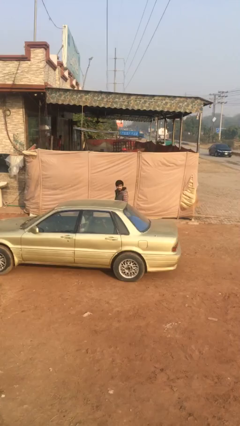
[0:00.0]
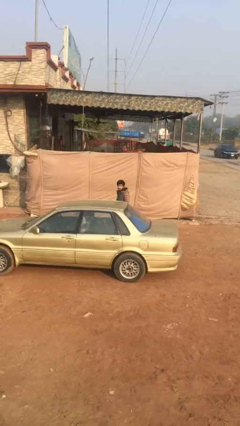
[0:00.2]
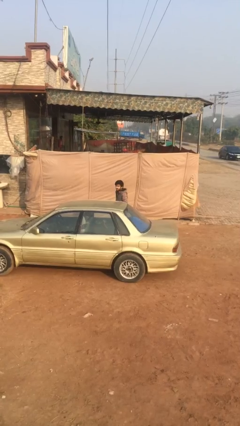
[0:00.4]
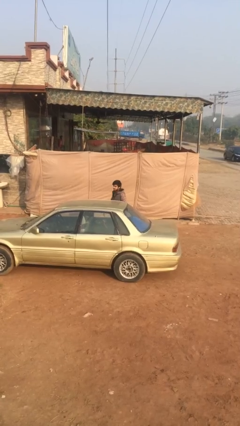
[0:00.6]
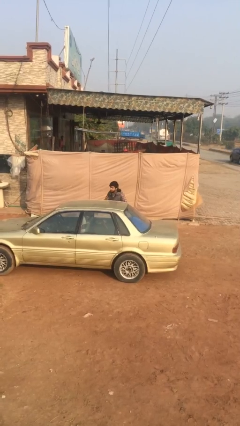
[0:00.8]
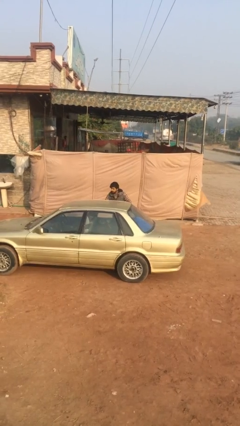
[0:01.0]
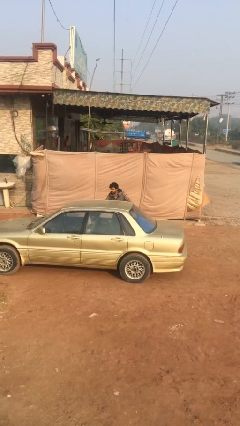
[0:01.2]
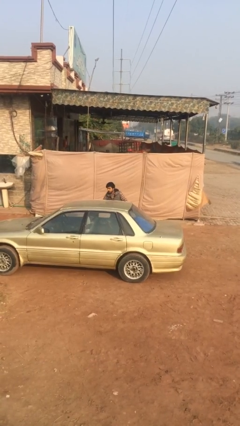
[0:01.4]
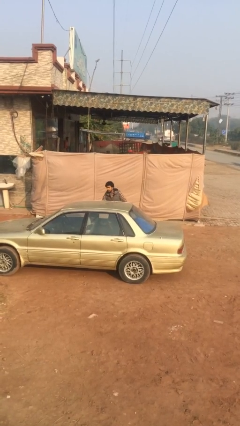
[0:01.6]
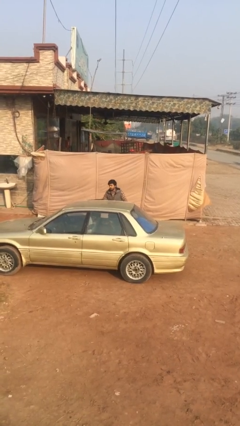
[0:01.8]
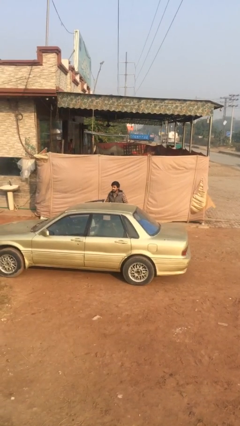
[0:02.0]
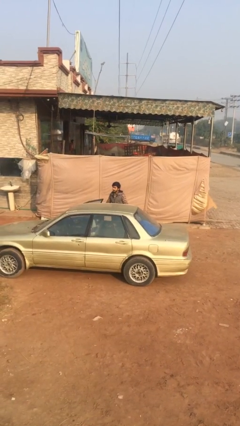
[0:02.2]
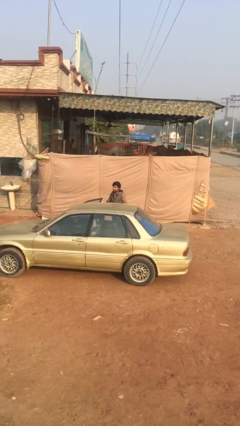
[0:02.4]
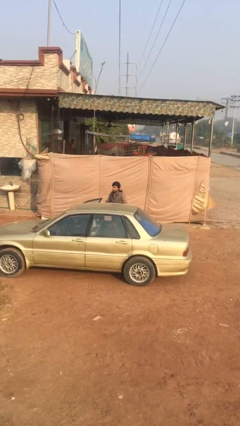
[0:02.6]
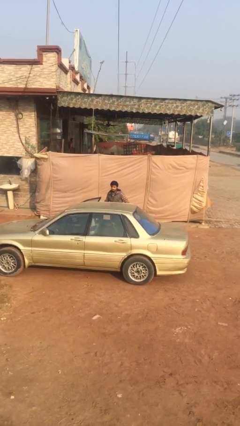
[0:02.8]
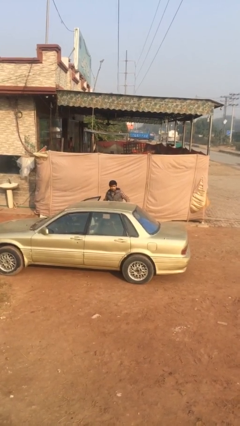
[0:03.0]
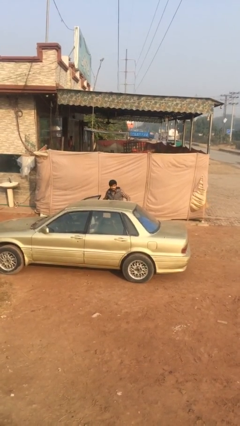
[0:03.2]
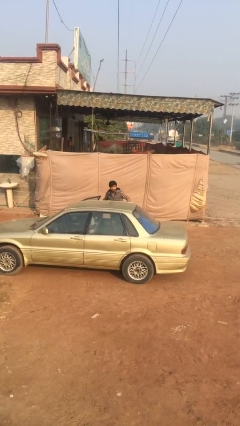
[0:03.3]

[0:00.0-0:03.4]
person opens car door

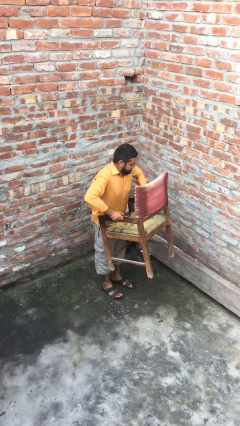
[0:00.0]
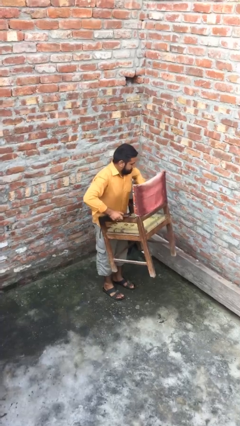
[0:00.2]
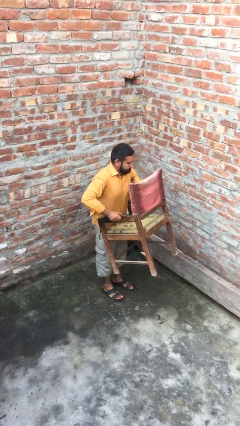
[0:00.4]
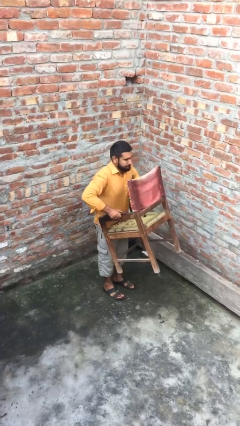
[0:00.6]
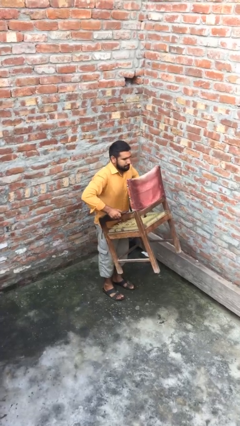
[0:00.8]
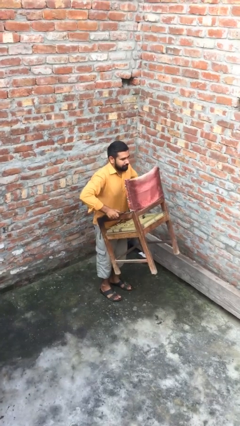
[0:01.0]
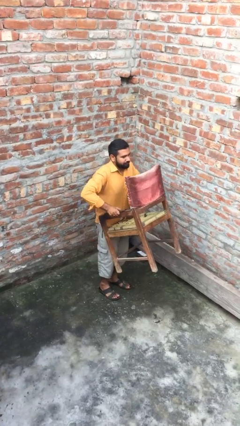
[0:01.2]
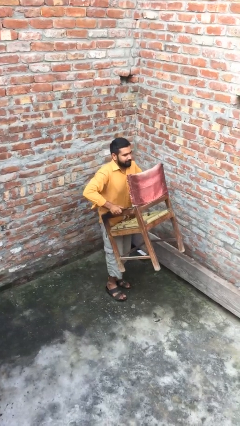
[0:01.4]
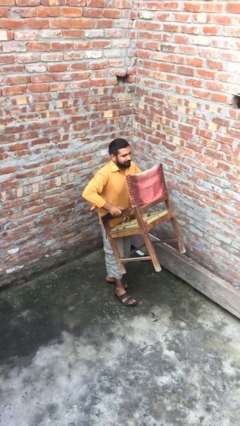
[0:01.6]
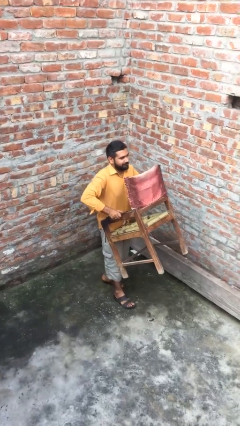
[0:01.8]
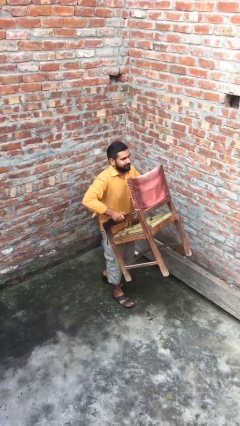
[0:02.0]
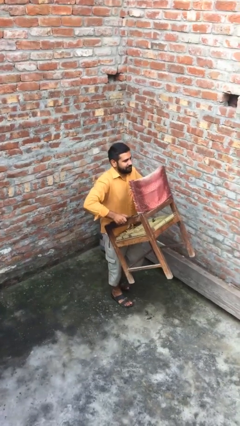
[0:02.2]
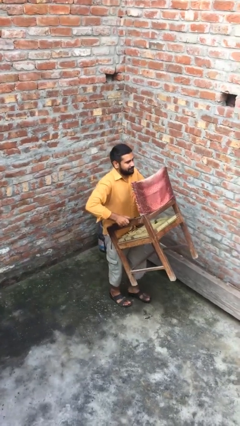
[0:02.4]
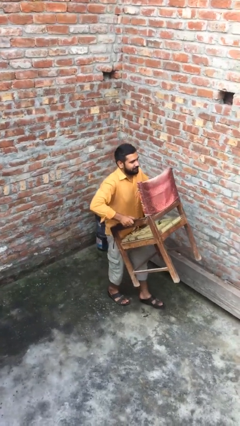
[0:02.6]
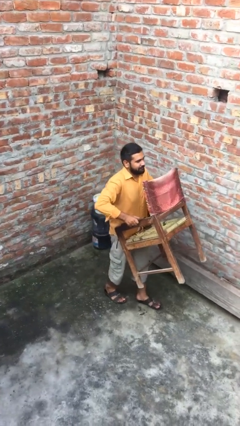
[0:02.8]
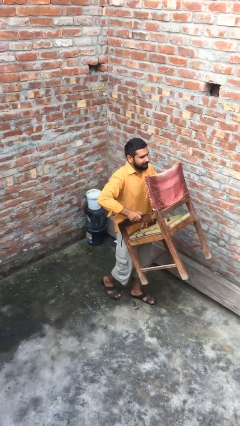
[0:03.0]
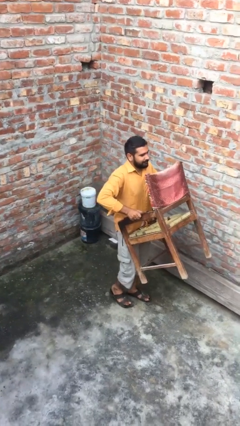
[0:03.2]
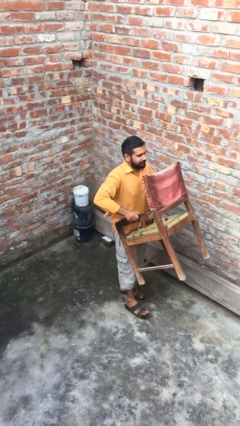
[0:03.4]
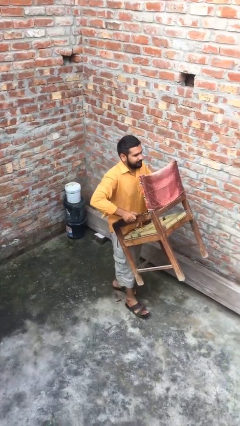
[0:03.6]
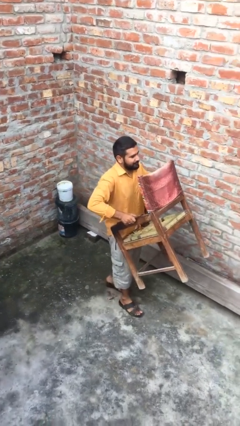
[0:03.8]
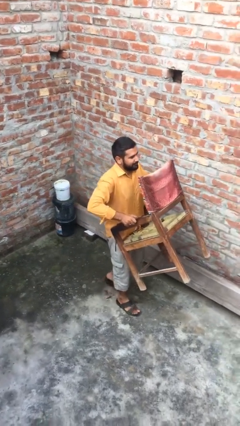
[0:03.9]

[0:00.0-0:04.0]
person carries heavy object

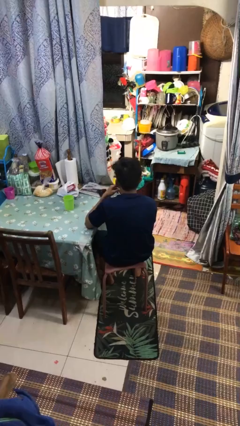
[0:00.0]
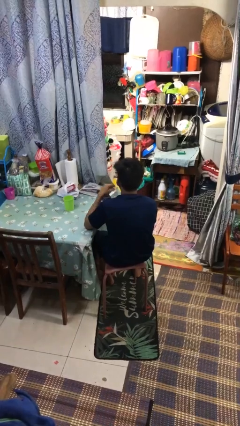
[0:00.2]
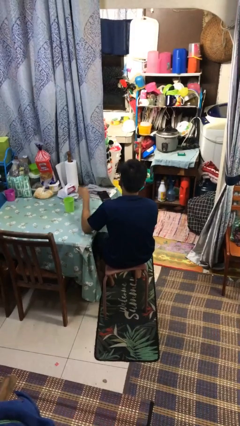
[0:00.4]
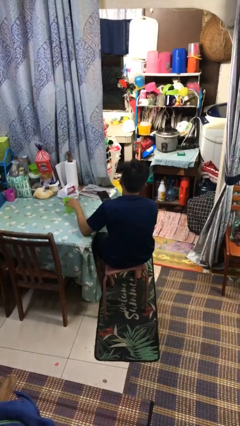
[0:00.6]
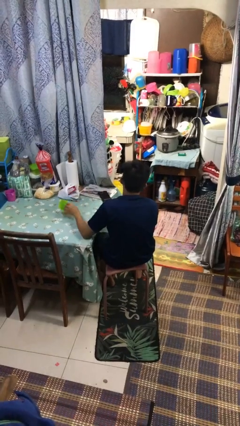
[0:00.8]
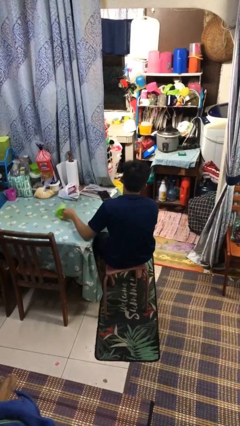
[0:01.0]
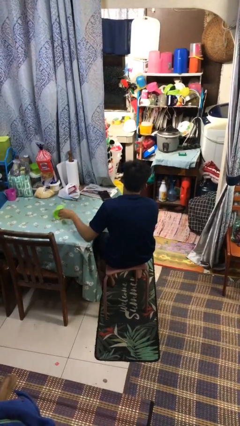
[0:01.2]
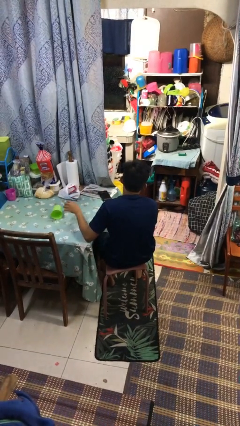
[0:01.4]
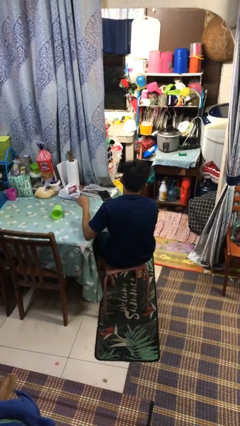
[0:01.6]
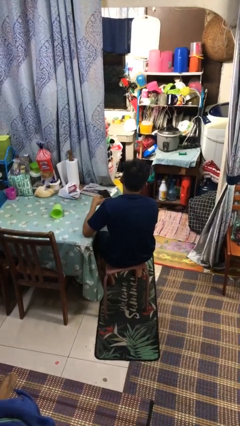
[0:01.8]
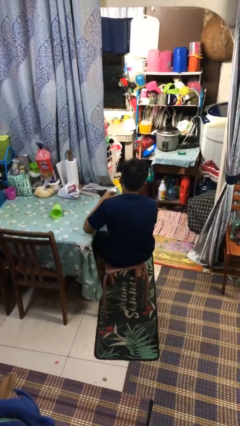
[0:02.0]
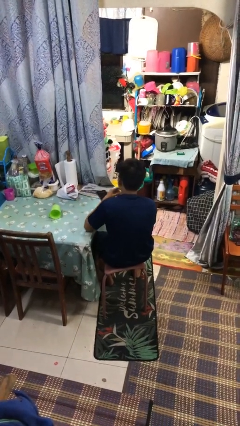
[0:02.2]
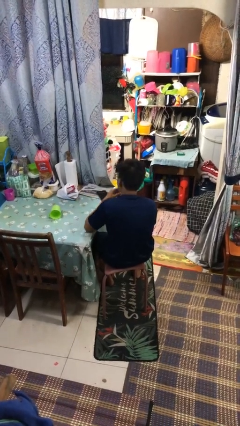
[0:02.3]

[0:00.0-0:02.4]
person knocks over glass

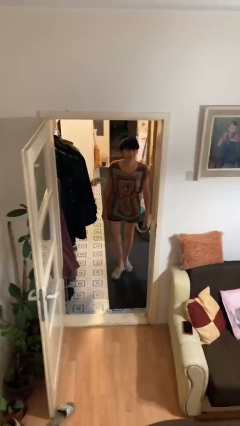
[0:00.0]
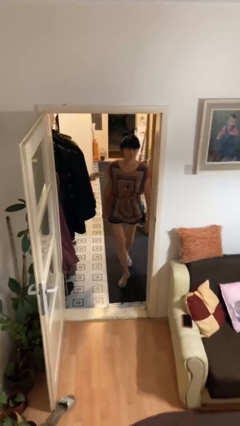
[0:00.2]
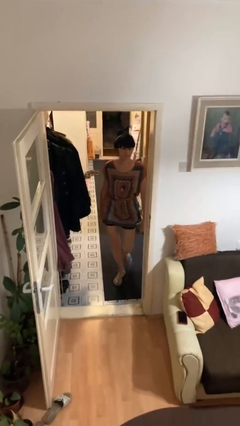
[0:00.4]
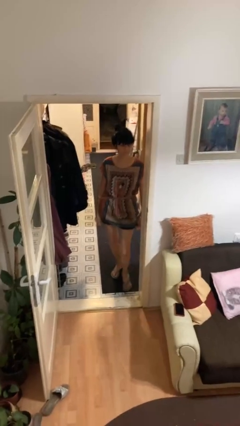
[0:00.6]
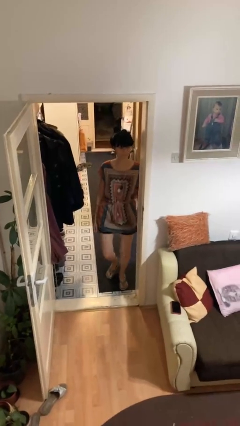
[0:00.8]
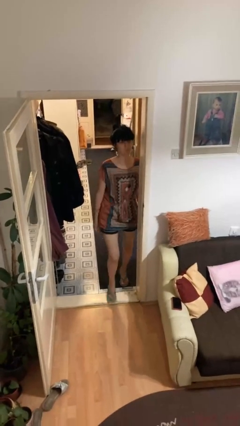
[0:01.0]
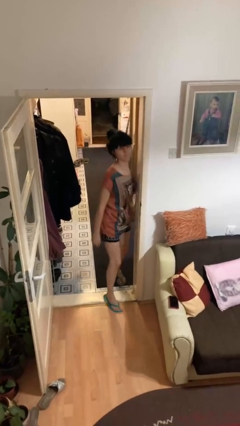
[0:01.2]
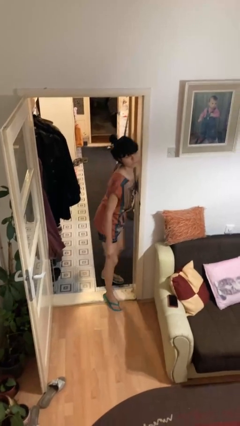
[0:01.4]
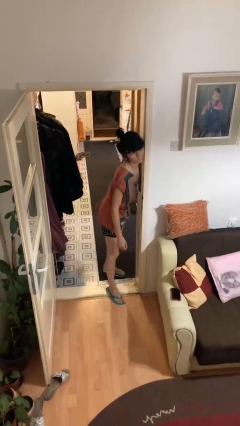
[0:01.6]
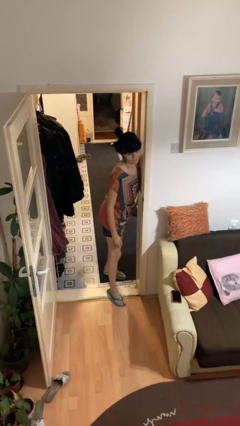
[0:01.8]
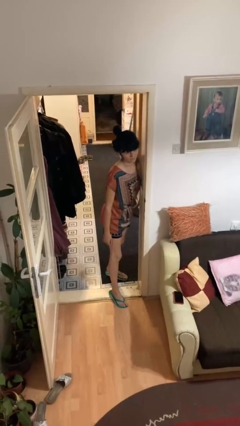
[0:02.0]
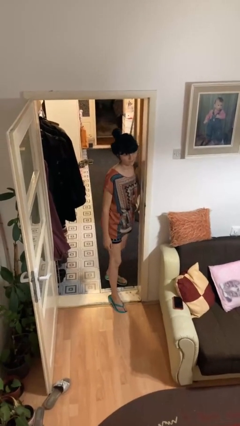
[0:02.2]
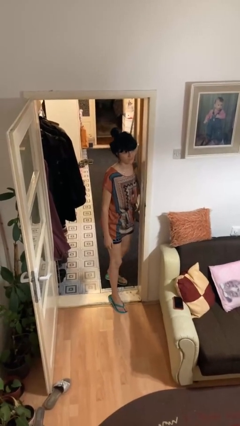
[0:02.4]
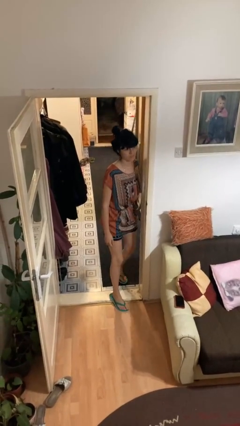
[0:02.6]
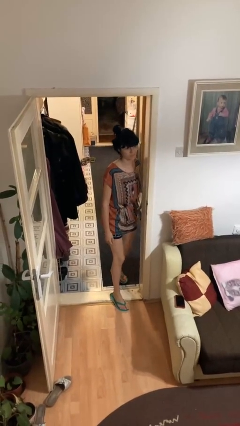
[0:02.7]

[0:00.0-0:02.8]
person bumps into wall

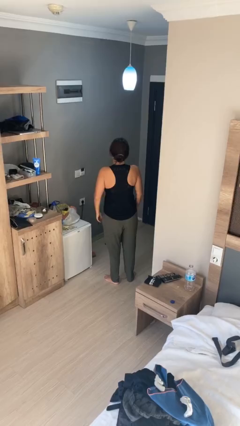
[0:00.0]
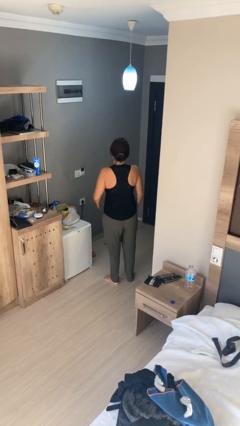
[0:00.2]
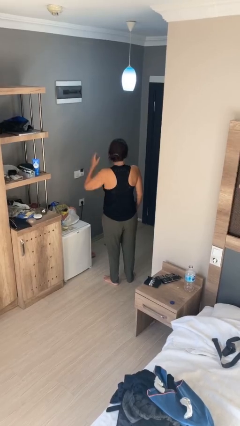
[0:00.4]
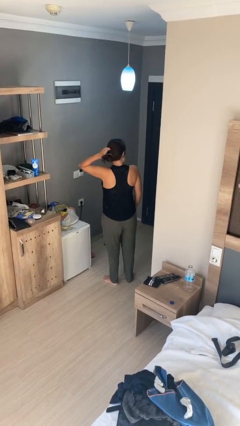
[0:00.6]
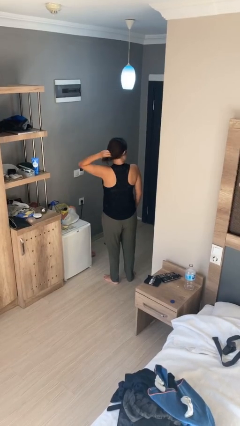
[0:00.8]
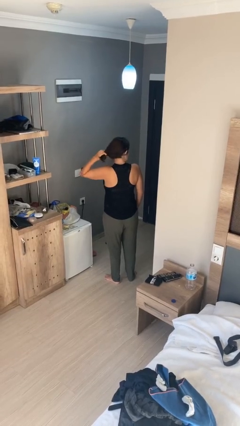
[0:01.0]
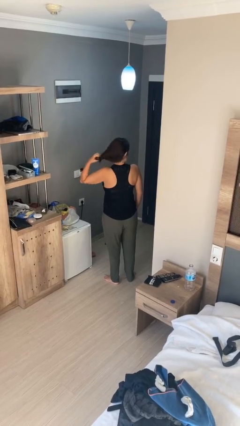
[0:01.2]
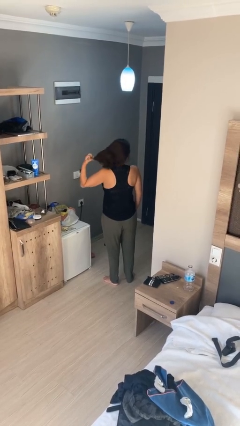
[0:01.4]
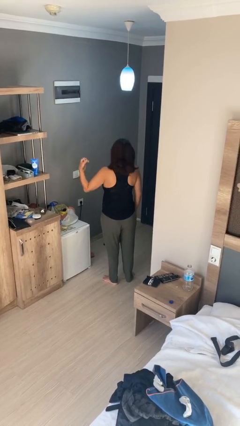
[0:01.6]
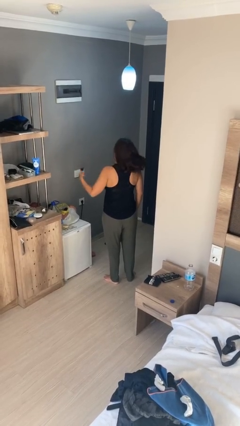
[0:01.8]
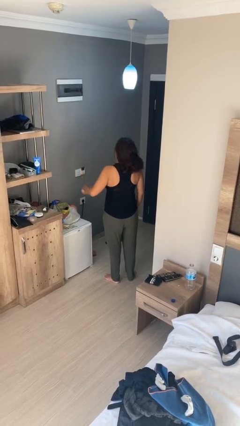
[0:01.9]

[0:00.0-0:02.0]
person takes off hairtie

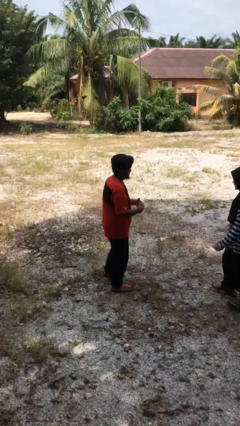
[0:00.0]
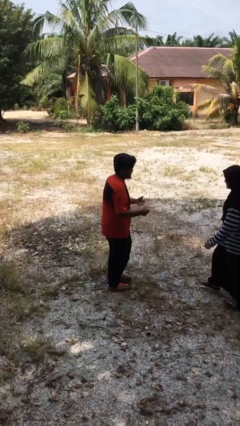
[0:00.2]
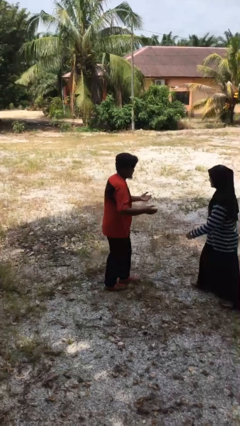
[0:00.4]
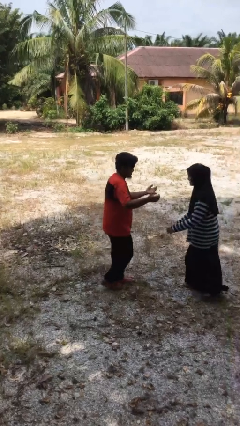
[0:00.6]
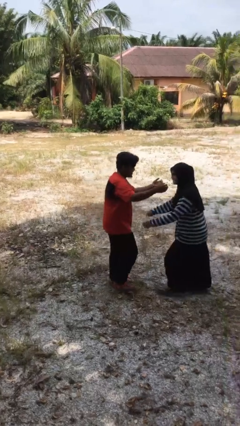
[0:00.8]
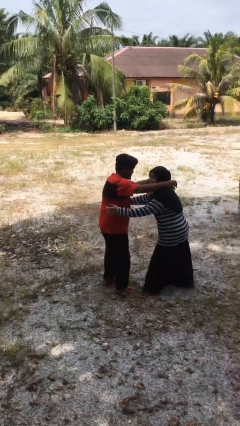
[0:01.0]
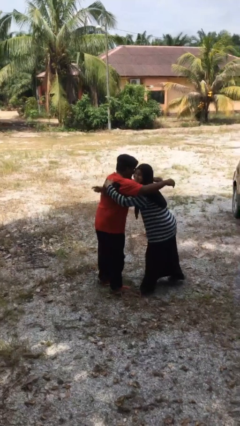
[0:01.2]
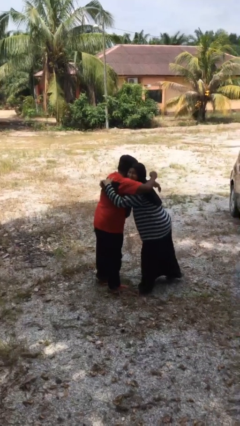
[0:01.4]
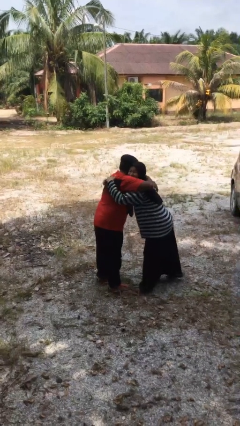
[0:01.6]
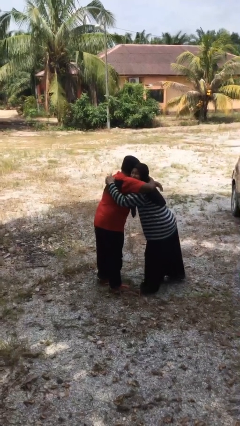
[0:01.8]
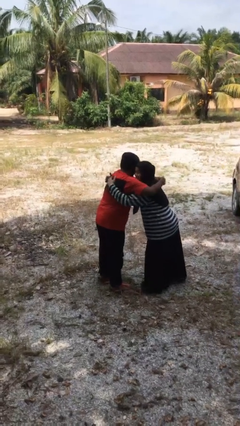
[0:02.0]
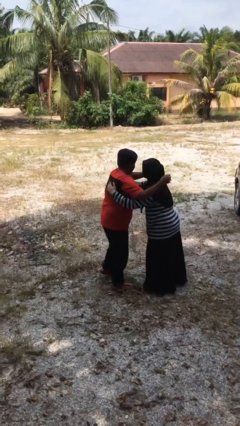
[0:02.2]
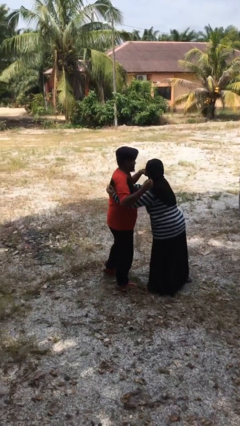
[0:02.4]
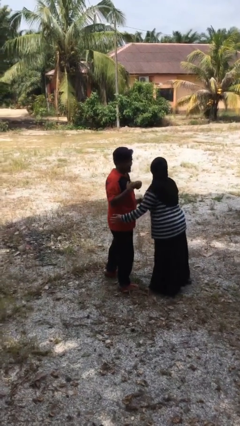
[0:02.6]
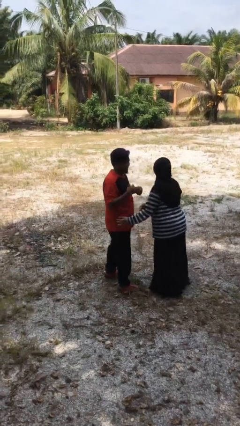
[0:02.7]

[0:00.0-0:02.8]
person embraces person

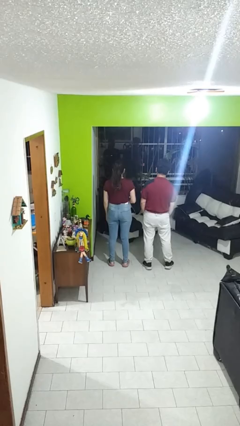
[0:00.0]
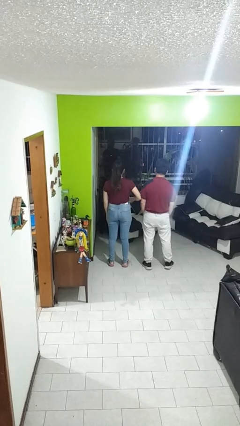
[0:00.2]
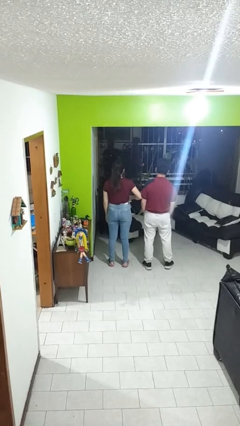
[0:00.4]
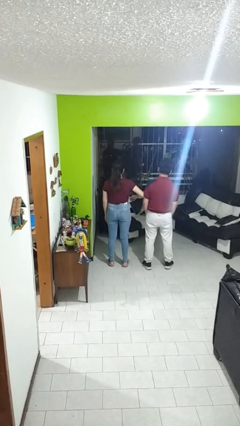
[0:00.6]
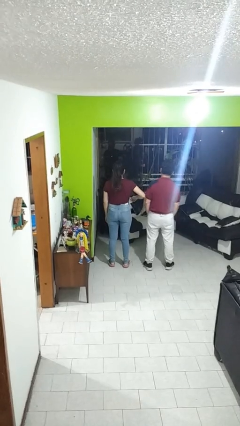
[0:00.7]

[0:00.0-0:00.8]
person nudges person with elbow
